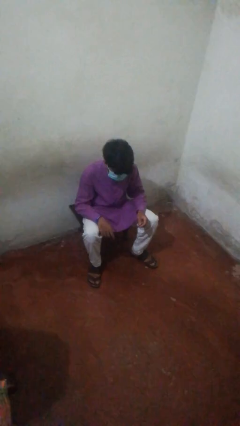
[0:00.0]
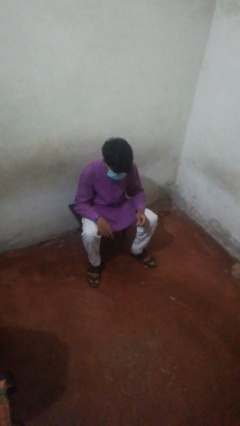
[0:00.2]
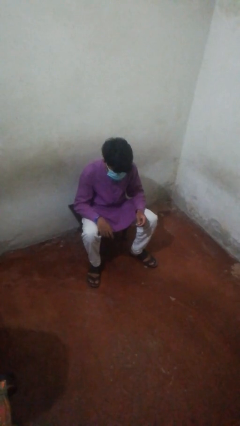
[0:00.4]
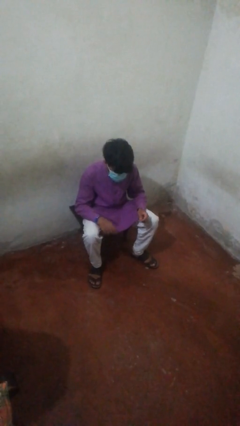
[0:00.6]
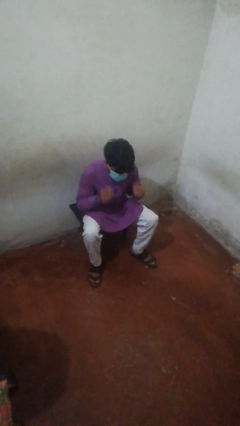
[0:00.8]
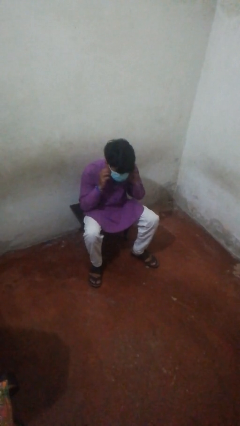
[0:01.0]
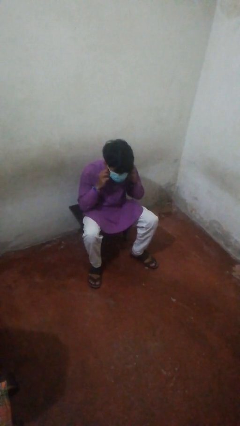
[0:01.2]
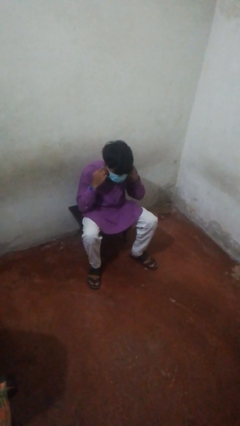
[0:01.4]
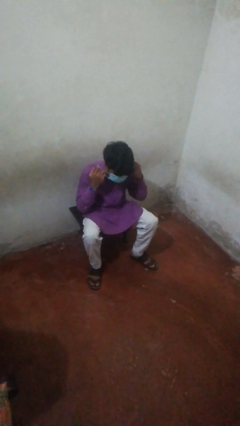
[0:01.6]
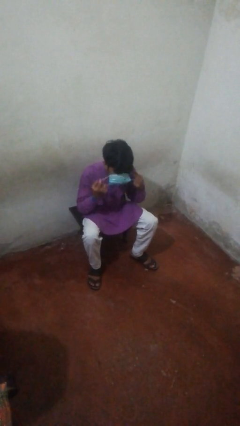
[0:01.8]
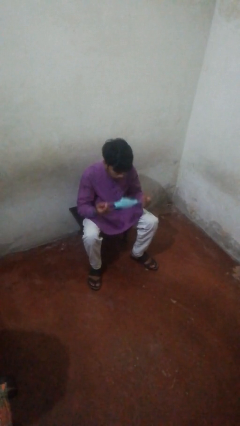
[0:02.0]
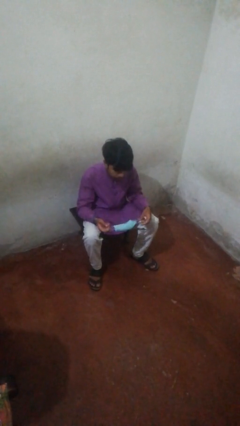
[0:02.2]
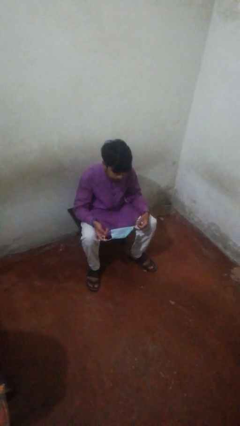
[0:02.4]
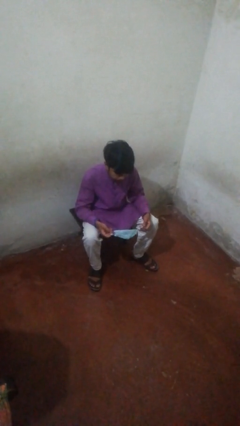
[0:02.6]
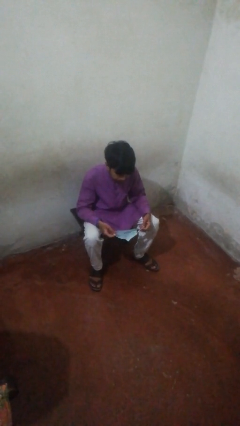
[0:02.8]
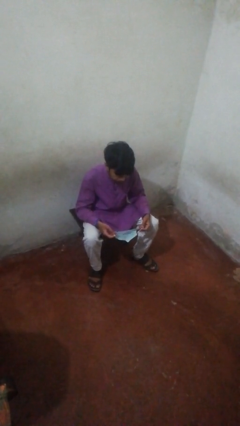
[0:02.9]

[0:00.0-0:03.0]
person takes off facemask

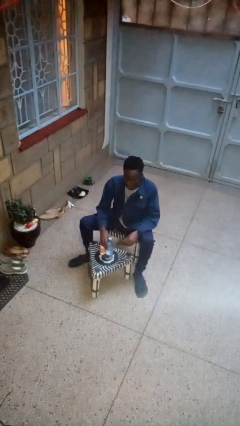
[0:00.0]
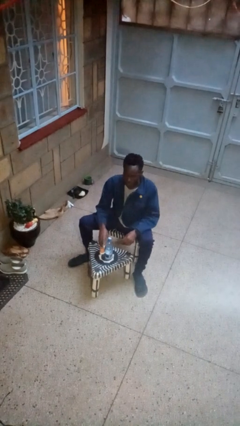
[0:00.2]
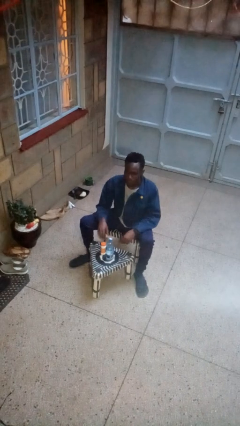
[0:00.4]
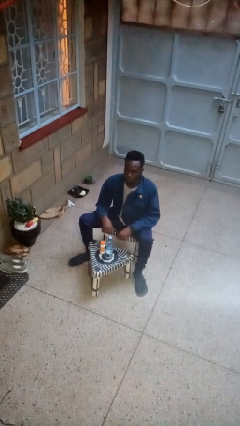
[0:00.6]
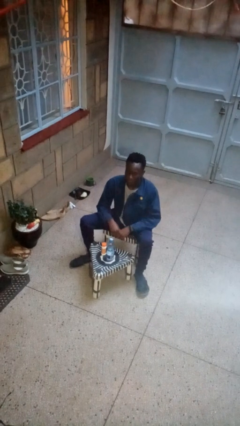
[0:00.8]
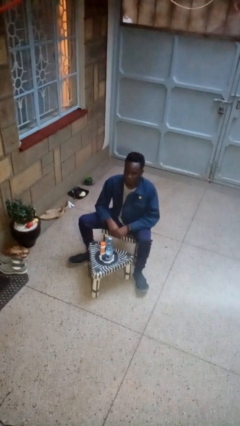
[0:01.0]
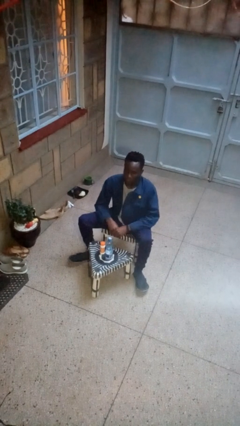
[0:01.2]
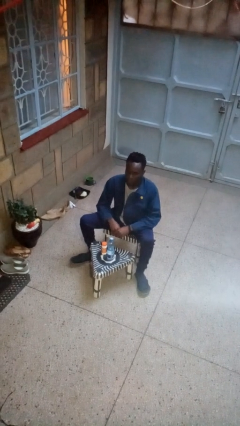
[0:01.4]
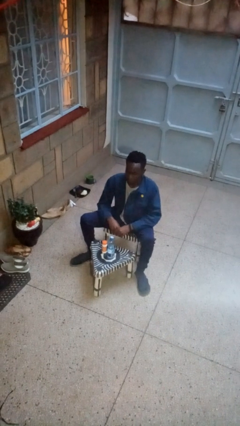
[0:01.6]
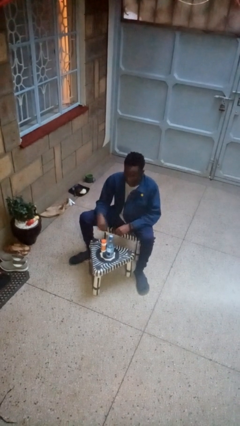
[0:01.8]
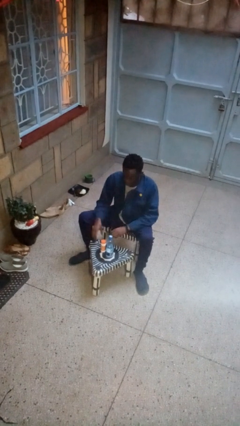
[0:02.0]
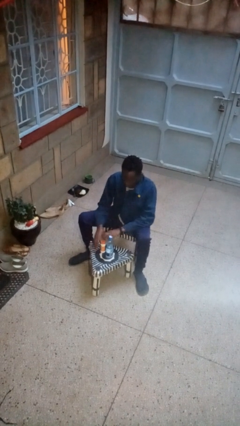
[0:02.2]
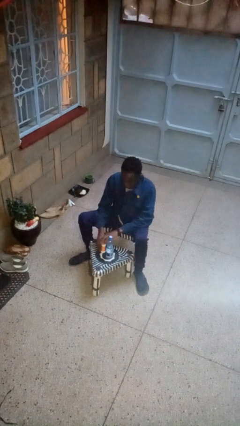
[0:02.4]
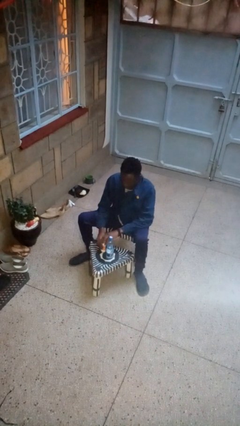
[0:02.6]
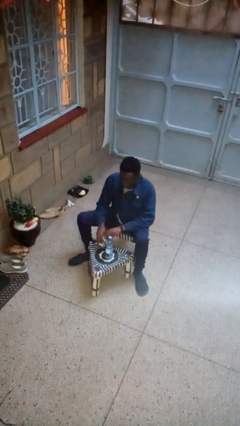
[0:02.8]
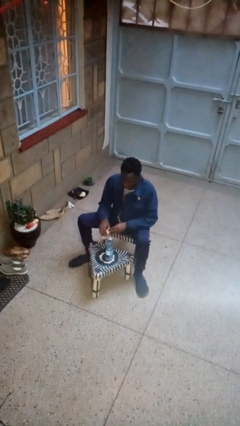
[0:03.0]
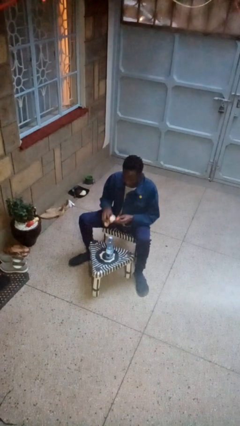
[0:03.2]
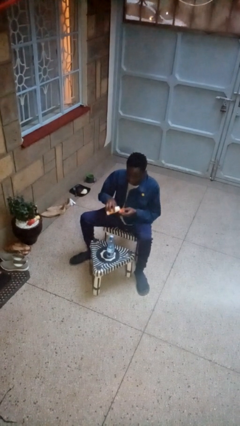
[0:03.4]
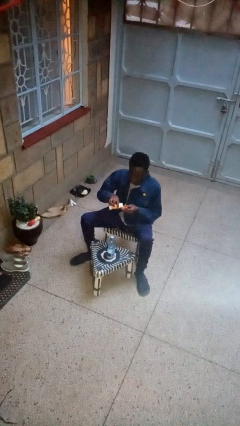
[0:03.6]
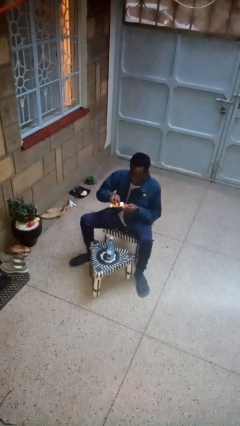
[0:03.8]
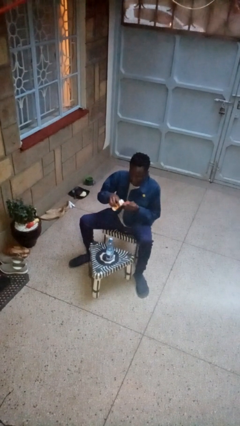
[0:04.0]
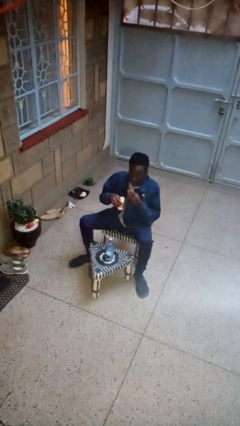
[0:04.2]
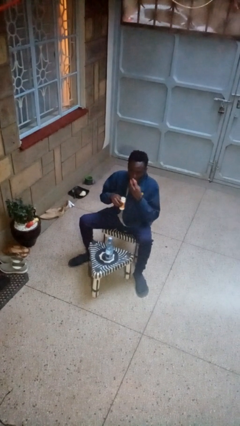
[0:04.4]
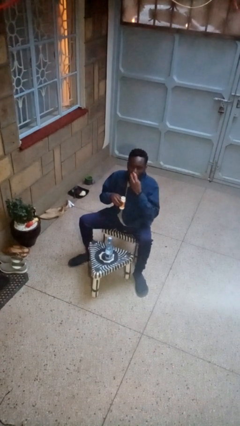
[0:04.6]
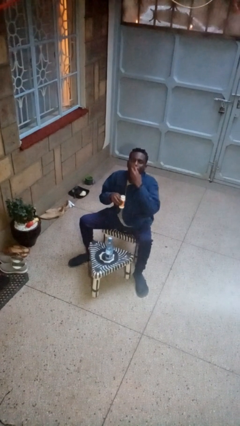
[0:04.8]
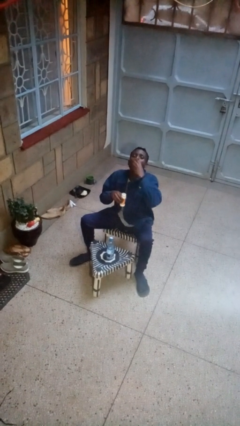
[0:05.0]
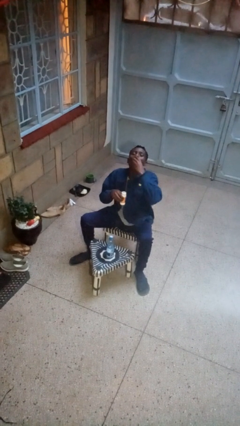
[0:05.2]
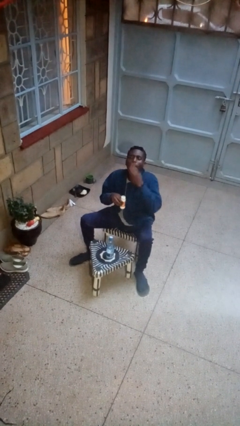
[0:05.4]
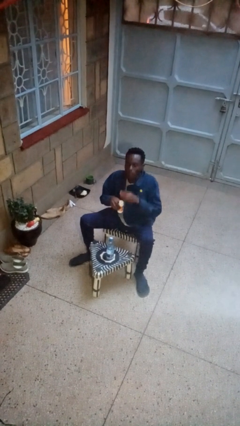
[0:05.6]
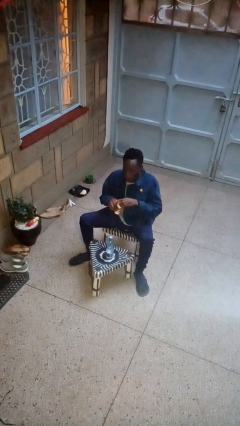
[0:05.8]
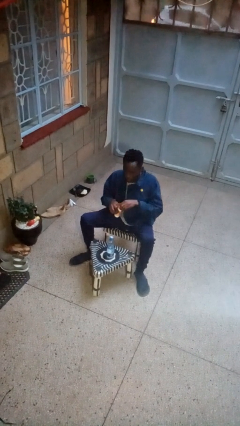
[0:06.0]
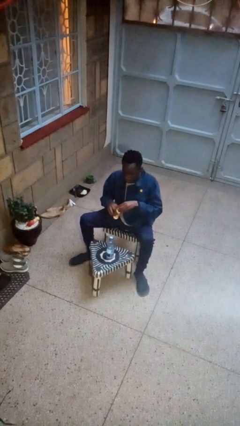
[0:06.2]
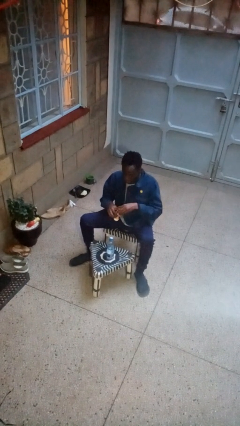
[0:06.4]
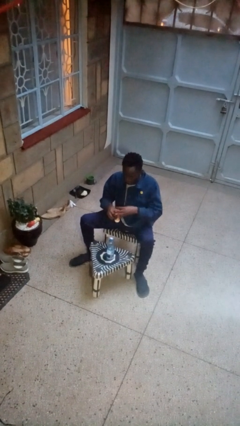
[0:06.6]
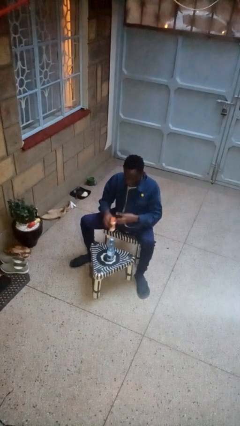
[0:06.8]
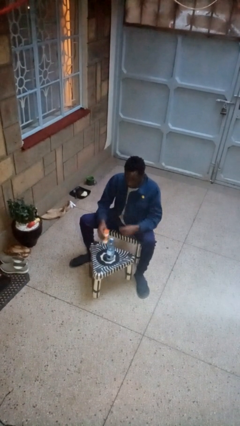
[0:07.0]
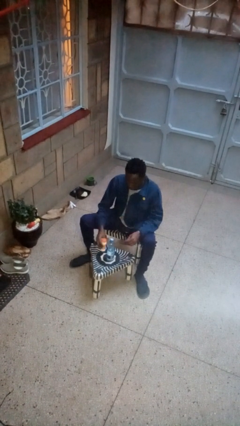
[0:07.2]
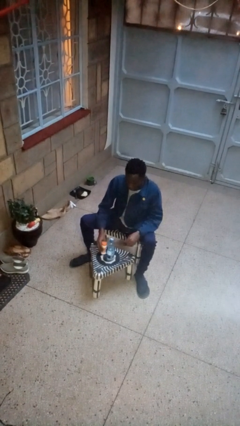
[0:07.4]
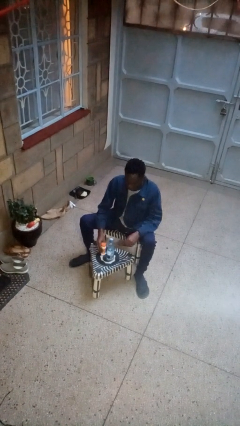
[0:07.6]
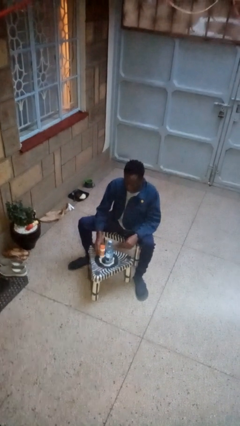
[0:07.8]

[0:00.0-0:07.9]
person takes medicine pills

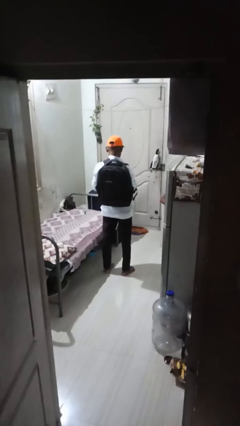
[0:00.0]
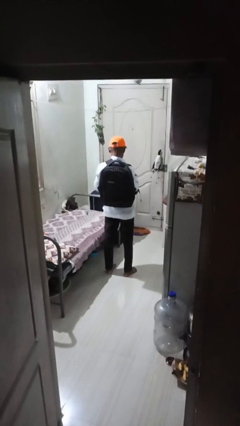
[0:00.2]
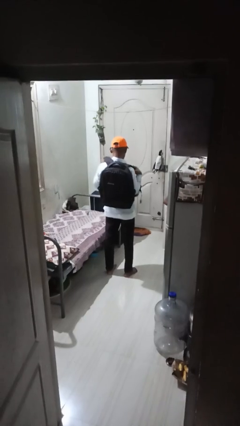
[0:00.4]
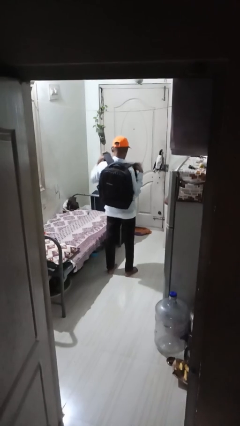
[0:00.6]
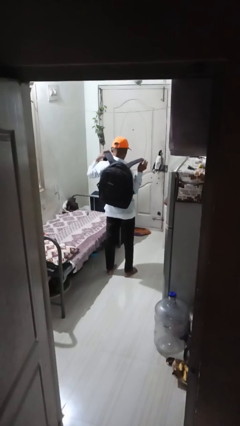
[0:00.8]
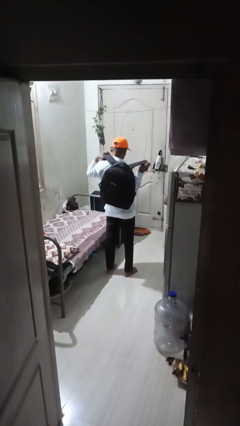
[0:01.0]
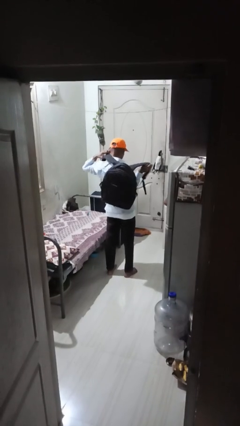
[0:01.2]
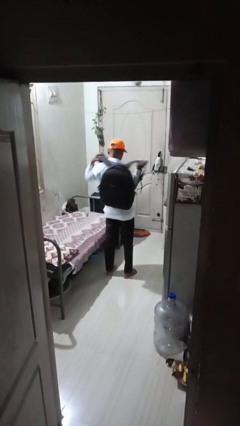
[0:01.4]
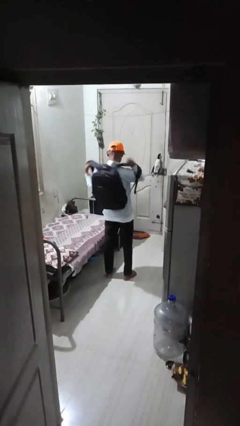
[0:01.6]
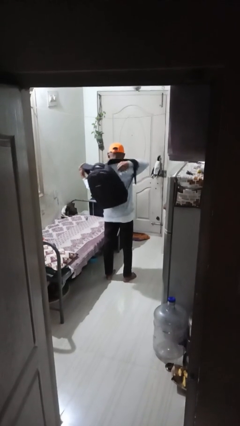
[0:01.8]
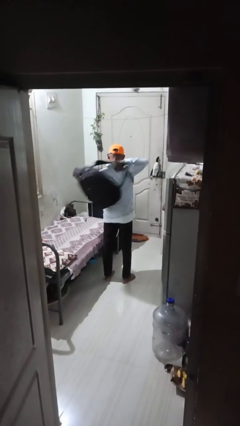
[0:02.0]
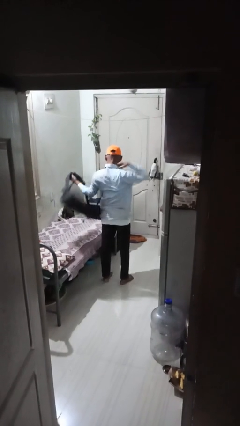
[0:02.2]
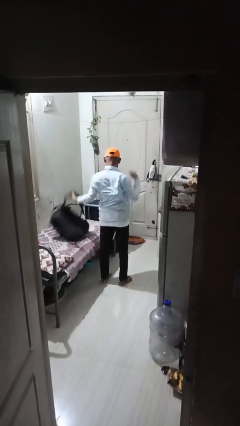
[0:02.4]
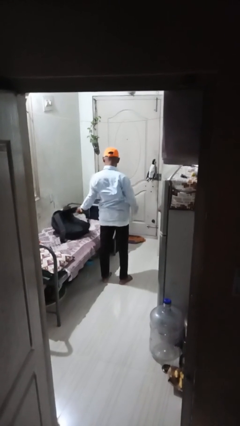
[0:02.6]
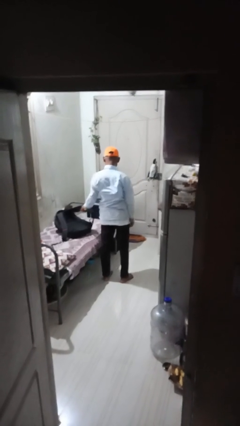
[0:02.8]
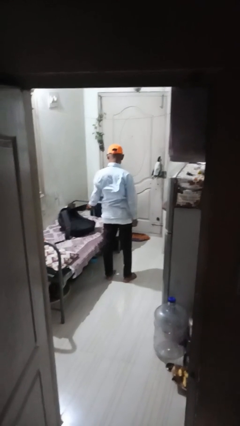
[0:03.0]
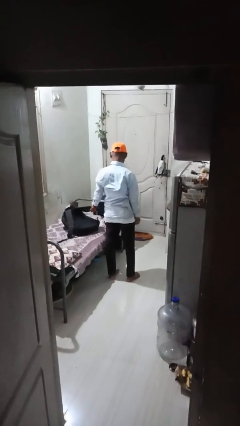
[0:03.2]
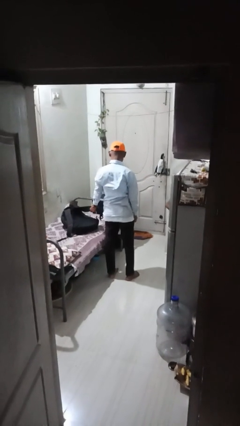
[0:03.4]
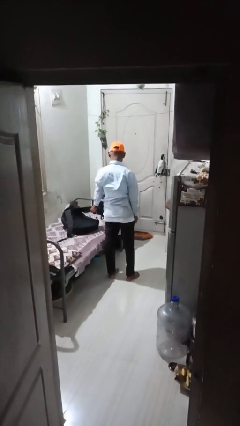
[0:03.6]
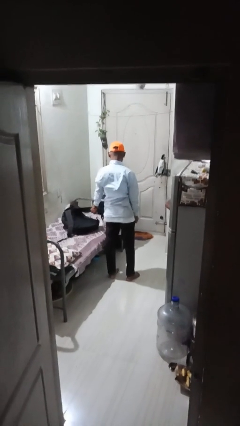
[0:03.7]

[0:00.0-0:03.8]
person takes off backpack

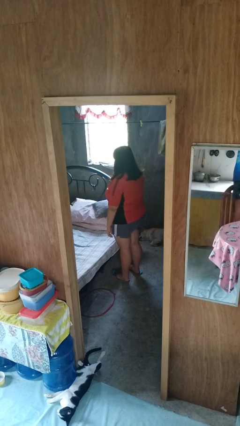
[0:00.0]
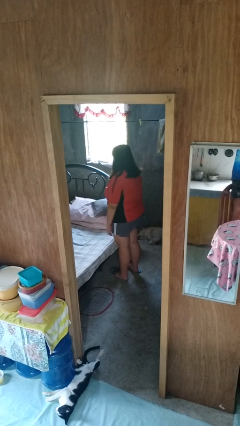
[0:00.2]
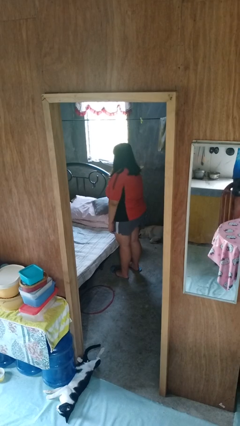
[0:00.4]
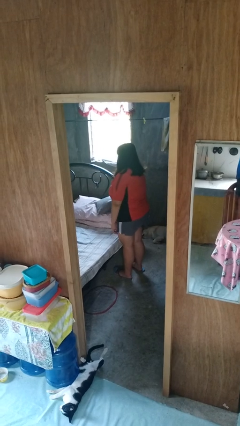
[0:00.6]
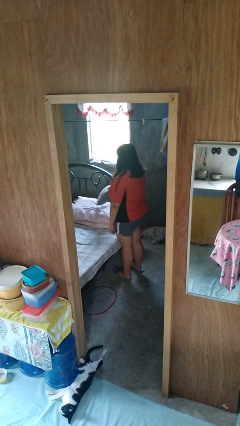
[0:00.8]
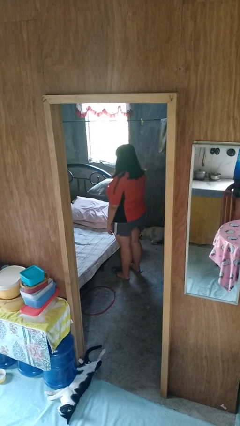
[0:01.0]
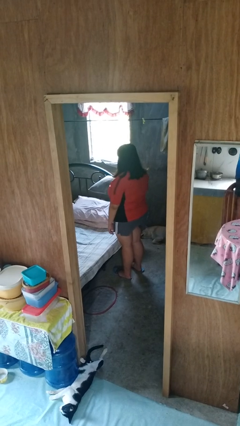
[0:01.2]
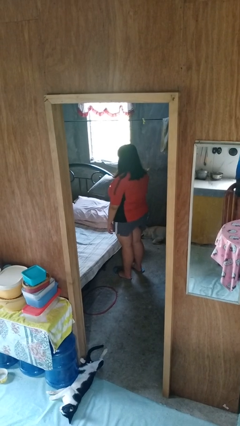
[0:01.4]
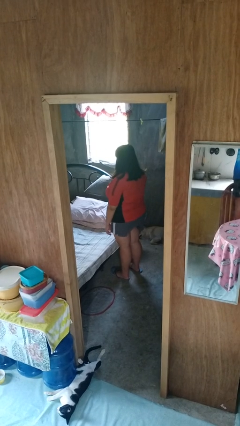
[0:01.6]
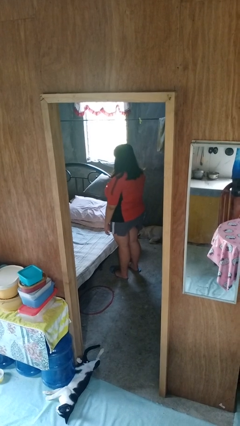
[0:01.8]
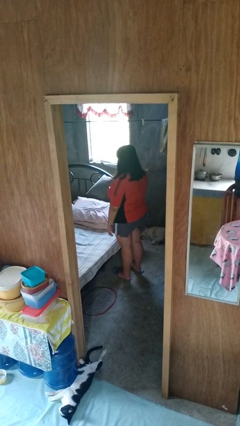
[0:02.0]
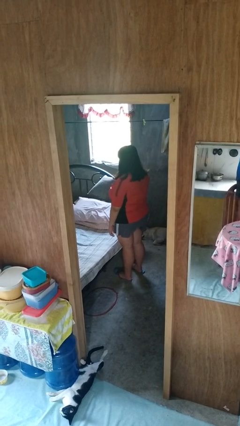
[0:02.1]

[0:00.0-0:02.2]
person picks up object from bed

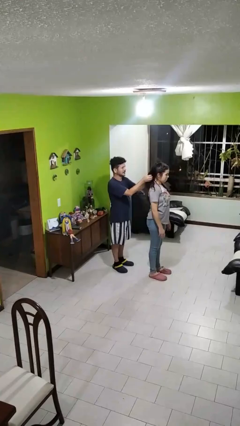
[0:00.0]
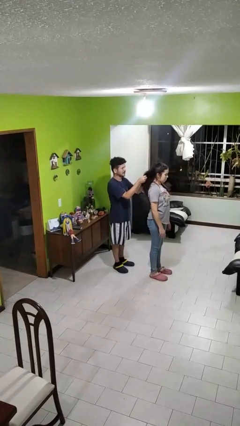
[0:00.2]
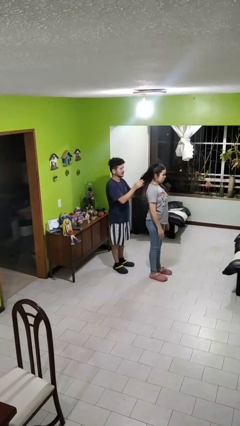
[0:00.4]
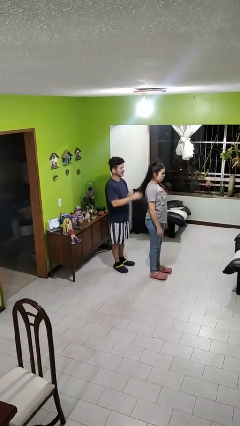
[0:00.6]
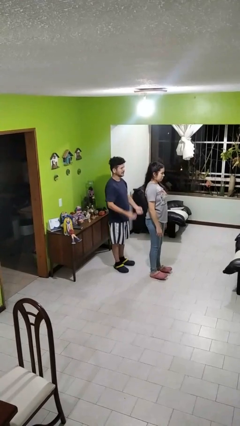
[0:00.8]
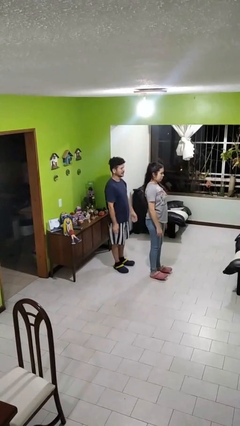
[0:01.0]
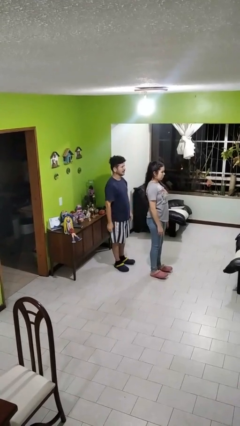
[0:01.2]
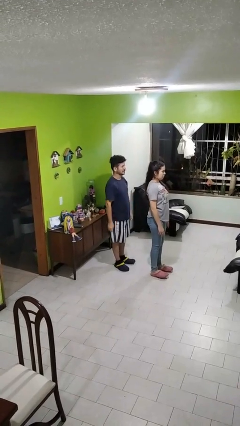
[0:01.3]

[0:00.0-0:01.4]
person grabs person by hair
